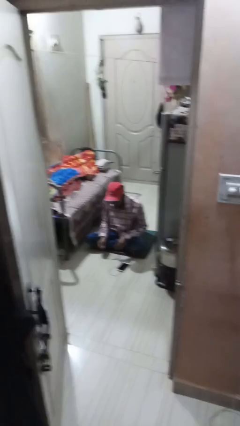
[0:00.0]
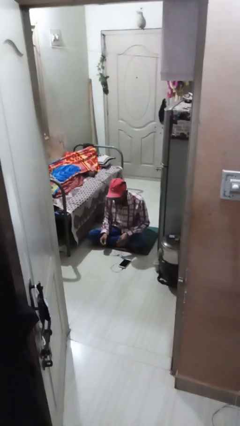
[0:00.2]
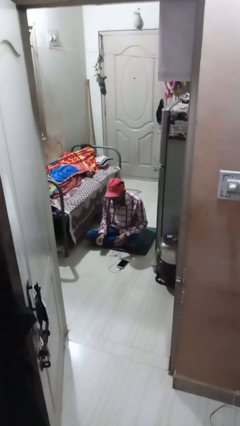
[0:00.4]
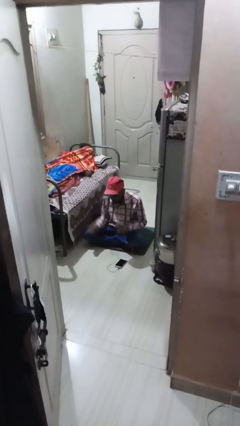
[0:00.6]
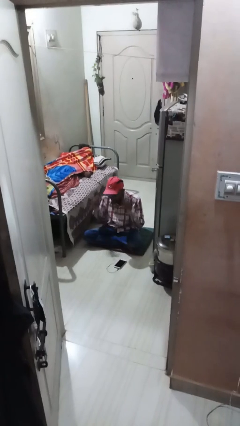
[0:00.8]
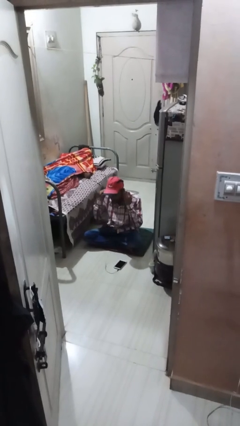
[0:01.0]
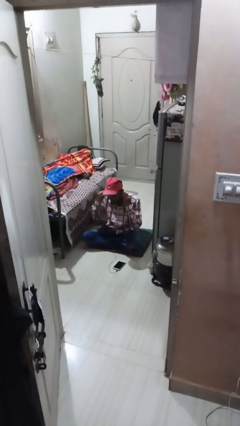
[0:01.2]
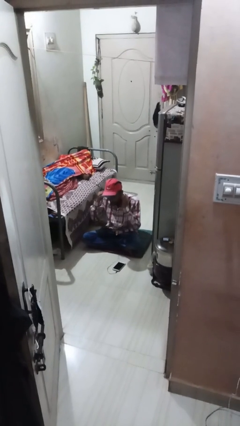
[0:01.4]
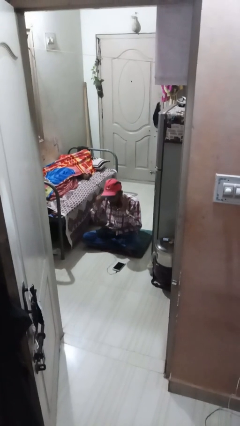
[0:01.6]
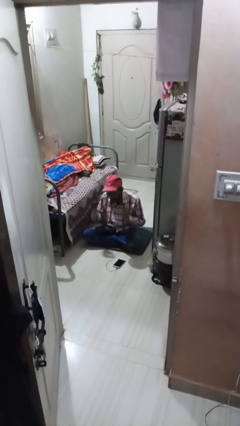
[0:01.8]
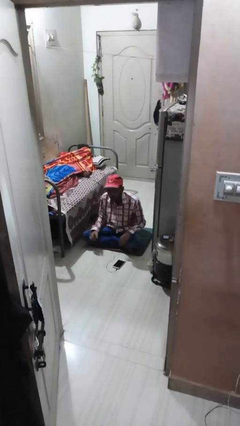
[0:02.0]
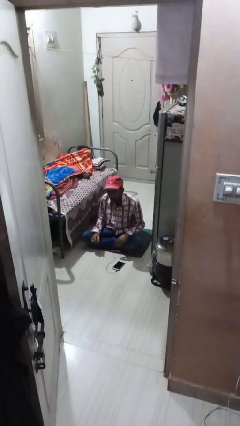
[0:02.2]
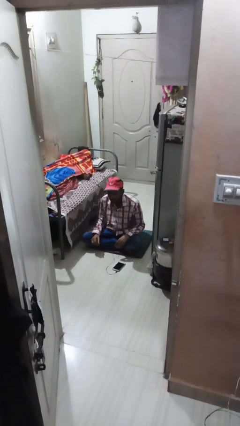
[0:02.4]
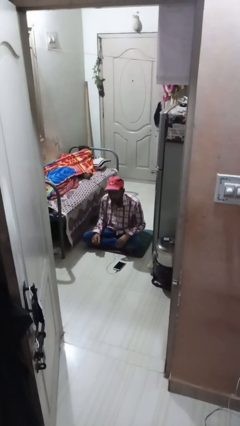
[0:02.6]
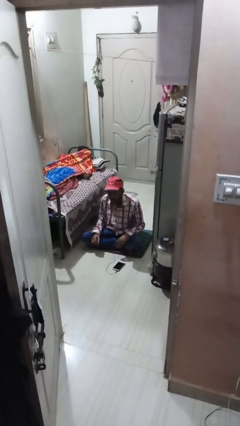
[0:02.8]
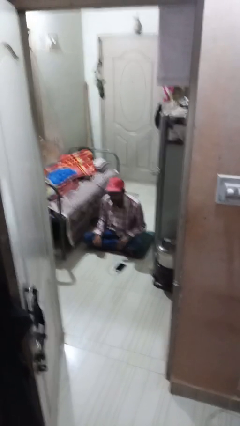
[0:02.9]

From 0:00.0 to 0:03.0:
person puts on headphones

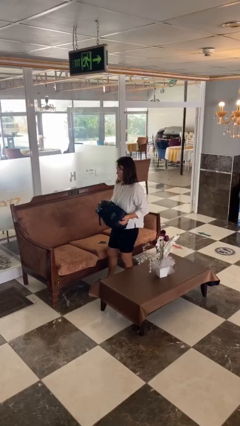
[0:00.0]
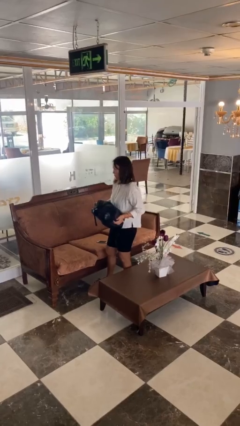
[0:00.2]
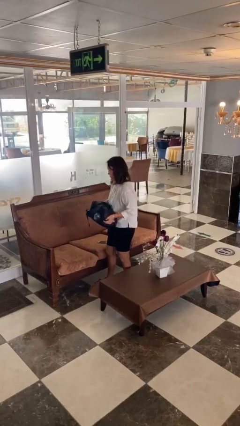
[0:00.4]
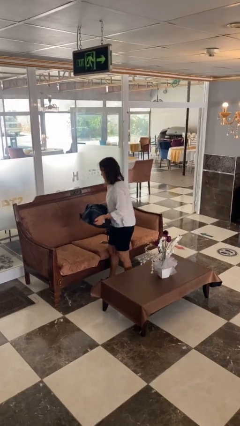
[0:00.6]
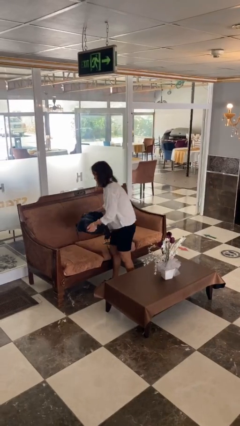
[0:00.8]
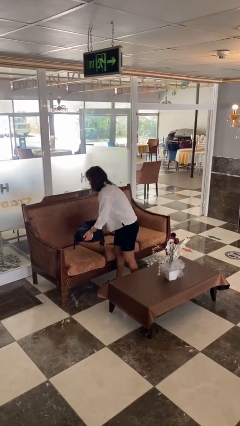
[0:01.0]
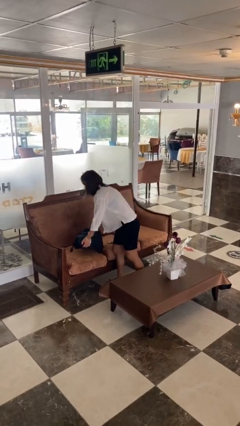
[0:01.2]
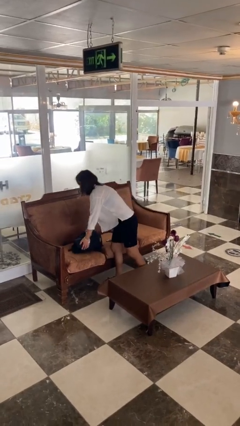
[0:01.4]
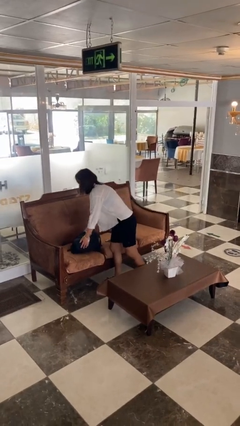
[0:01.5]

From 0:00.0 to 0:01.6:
person puts down object on couch

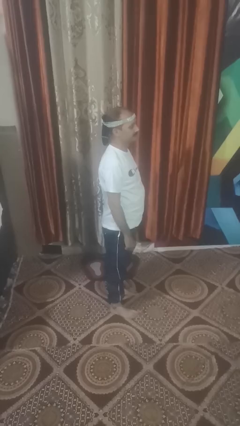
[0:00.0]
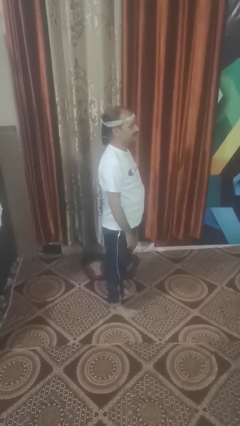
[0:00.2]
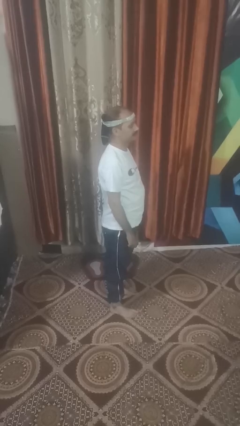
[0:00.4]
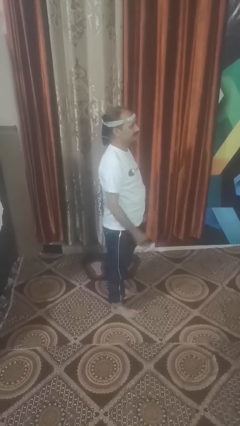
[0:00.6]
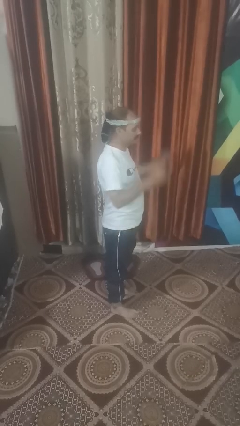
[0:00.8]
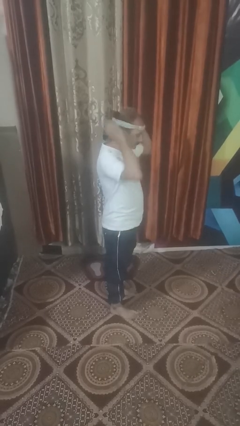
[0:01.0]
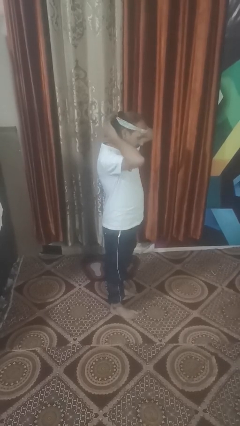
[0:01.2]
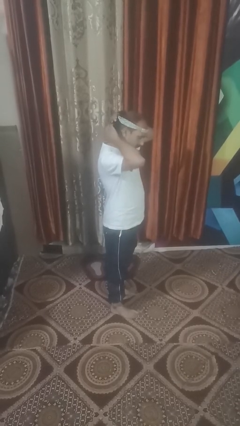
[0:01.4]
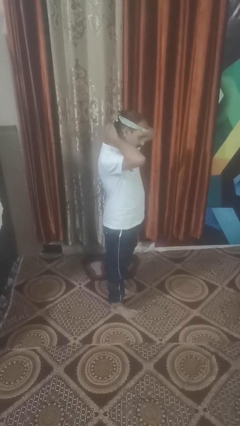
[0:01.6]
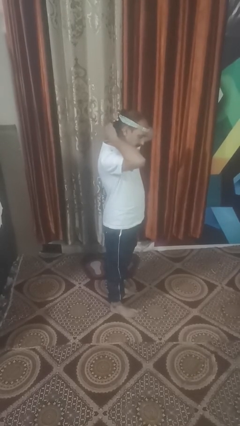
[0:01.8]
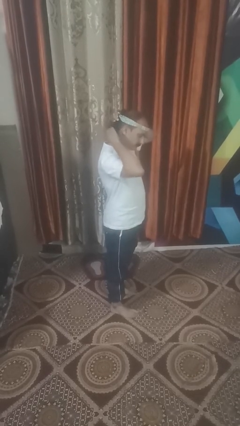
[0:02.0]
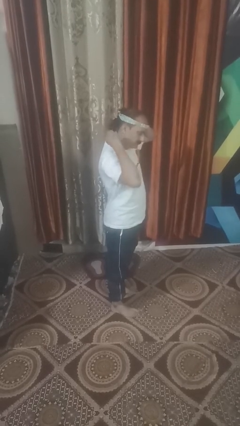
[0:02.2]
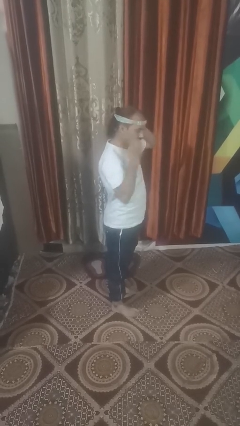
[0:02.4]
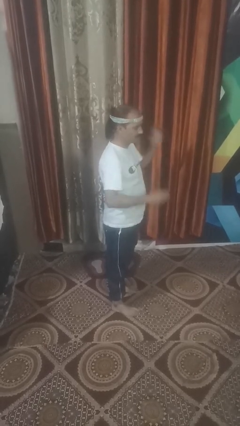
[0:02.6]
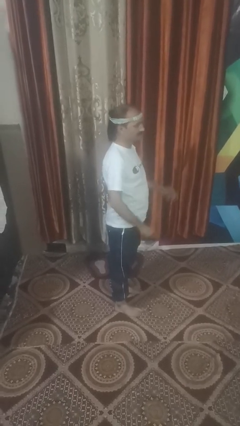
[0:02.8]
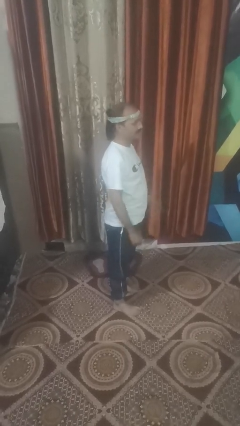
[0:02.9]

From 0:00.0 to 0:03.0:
person takes off hairtie

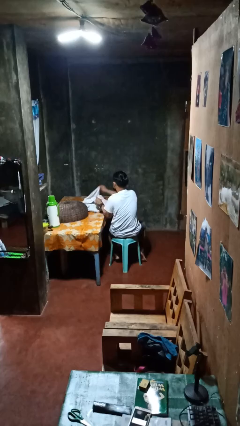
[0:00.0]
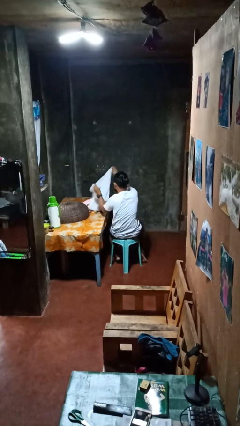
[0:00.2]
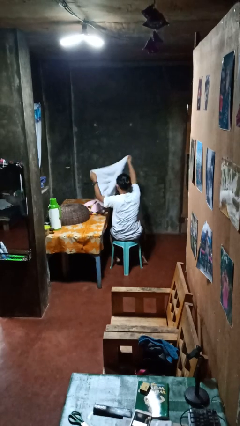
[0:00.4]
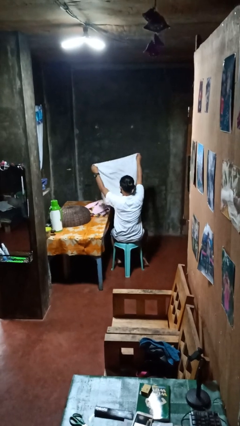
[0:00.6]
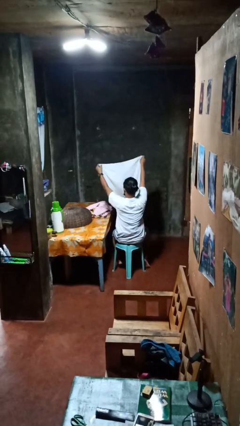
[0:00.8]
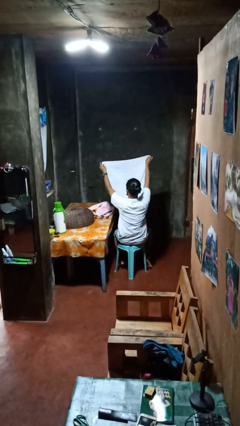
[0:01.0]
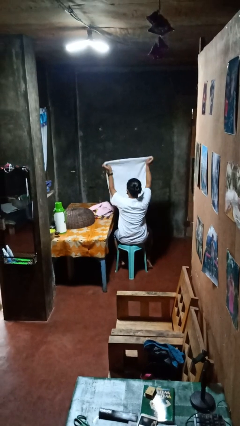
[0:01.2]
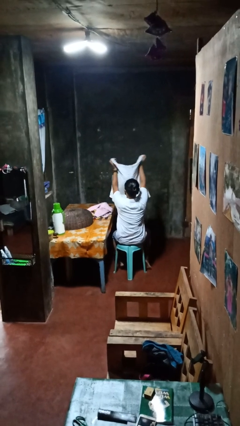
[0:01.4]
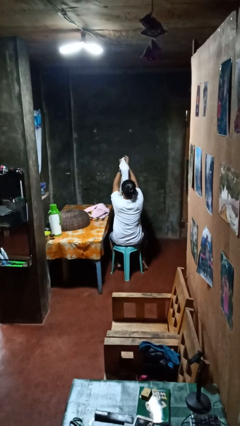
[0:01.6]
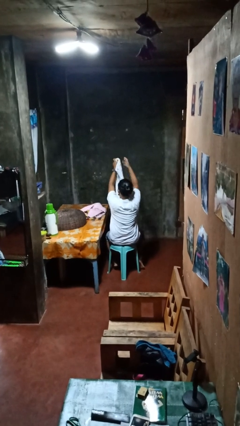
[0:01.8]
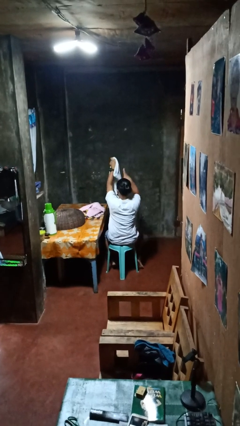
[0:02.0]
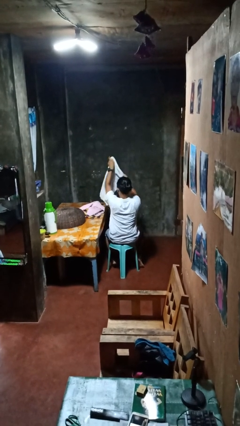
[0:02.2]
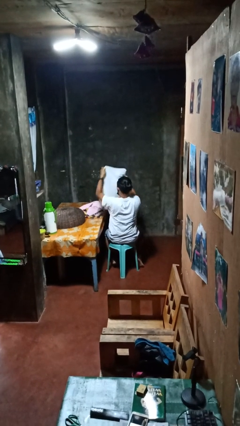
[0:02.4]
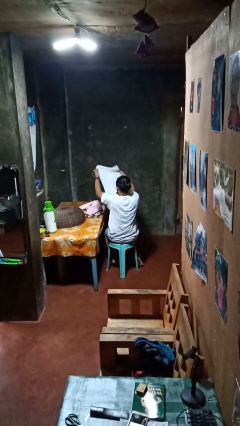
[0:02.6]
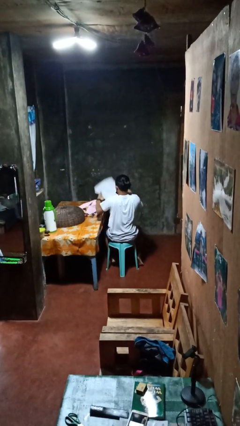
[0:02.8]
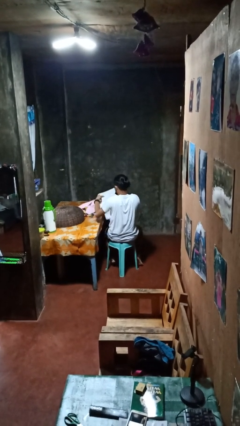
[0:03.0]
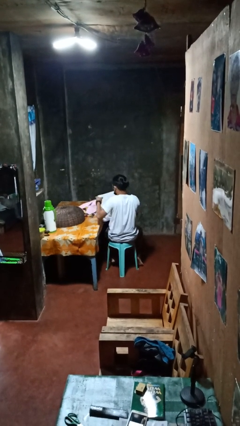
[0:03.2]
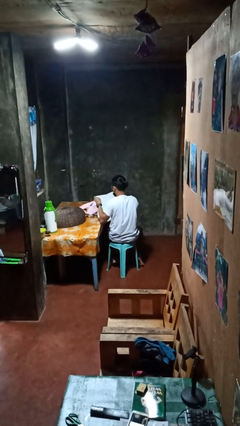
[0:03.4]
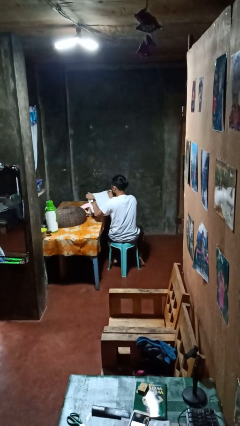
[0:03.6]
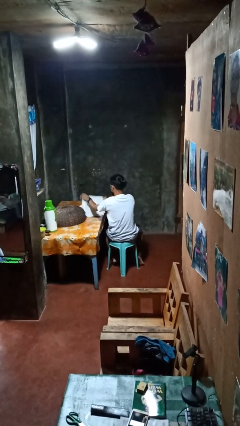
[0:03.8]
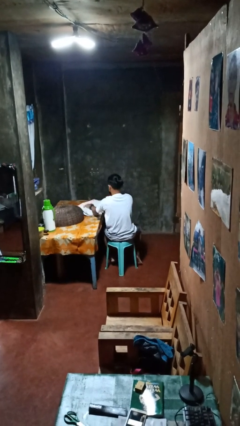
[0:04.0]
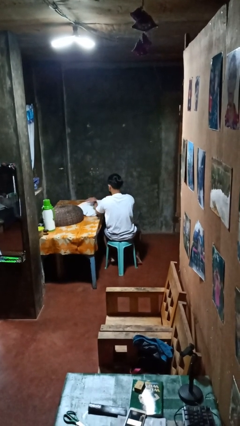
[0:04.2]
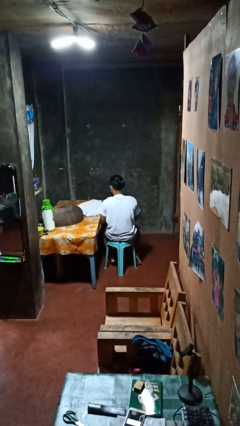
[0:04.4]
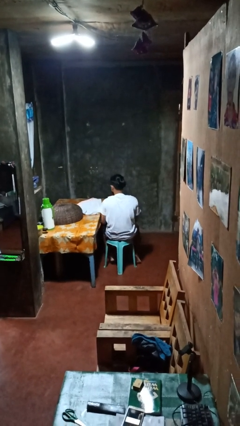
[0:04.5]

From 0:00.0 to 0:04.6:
person folds towel

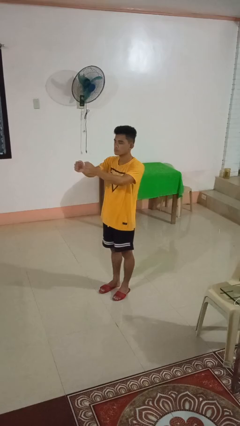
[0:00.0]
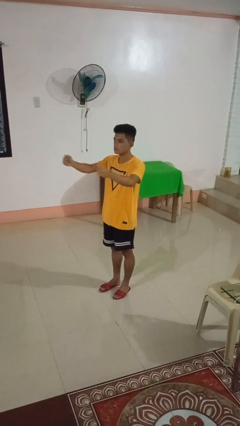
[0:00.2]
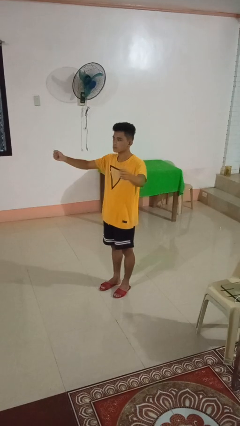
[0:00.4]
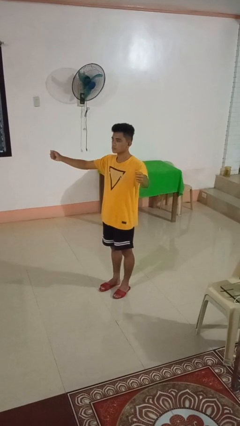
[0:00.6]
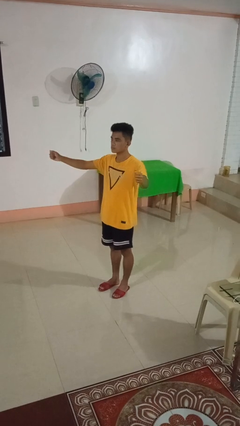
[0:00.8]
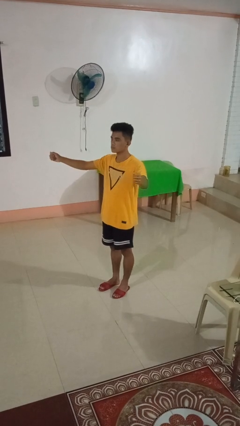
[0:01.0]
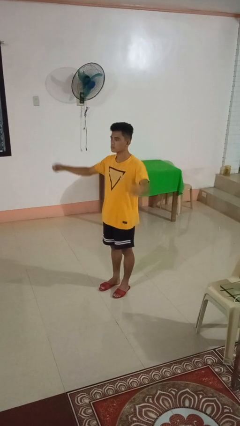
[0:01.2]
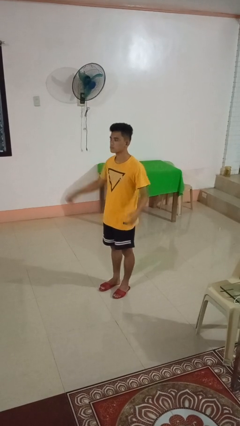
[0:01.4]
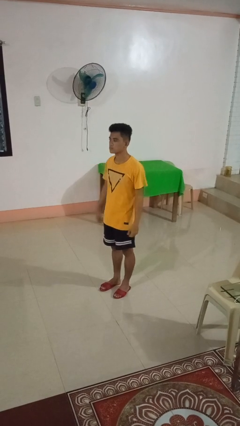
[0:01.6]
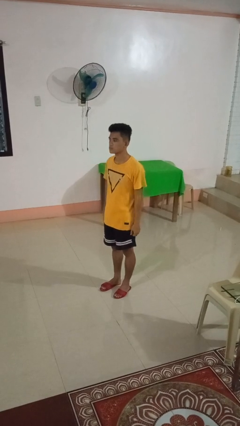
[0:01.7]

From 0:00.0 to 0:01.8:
person gestures zoom out

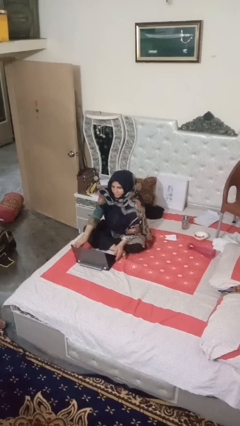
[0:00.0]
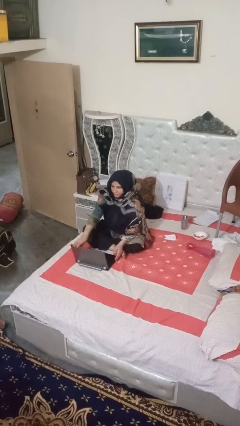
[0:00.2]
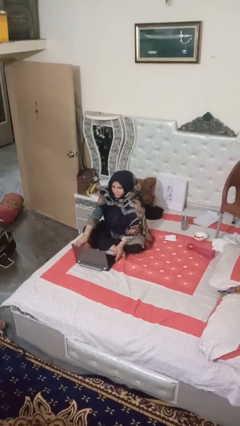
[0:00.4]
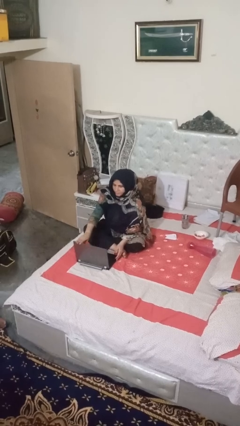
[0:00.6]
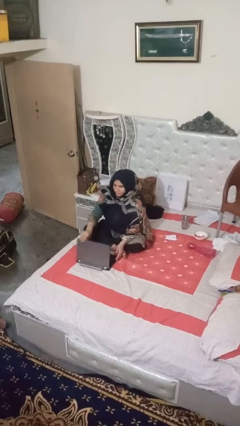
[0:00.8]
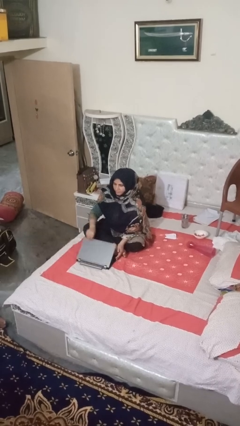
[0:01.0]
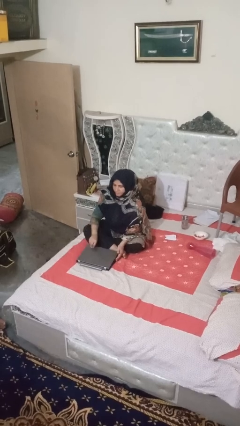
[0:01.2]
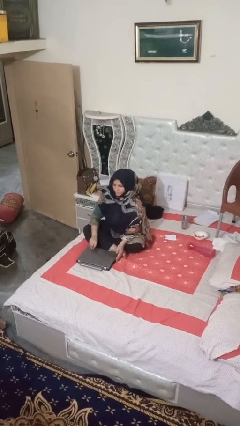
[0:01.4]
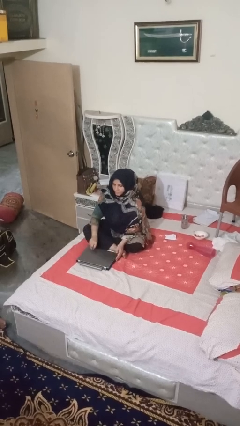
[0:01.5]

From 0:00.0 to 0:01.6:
person closes laptop

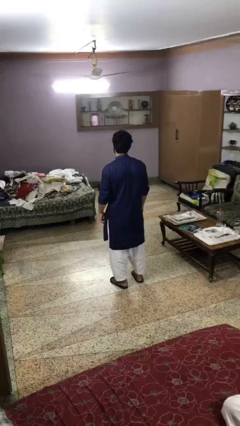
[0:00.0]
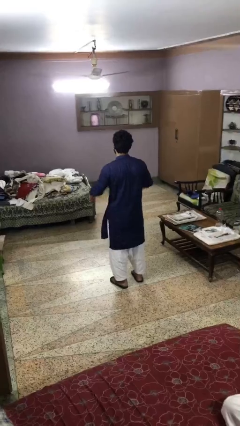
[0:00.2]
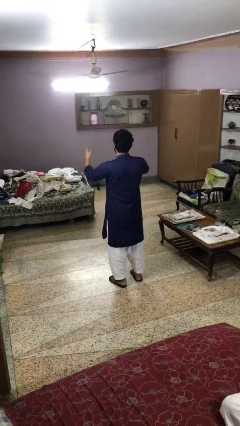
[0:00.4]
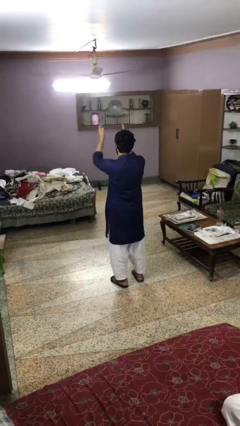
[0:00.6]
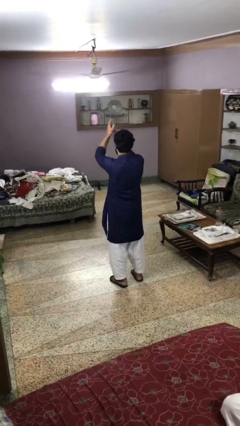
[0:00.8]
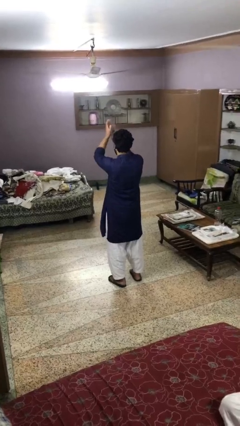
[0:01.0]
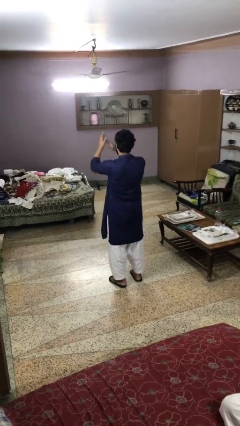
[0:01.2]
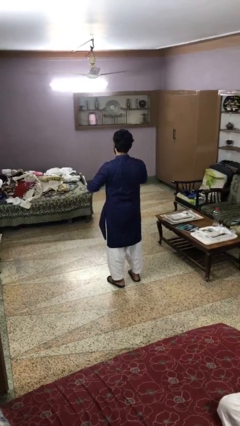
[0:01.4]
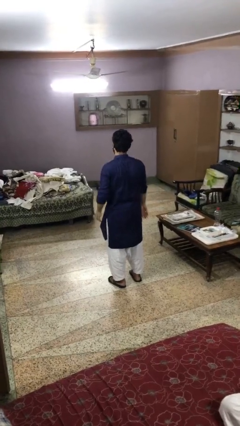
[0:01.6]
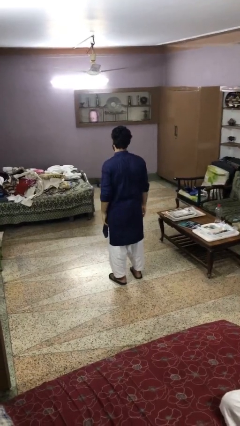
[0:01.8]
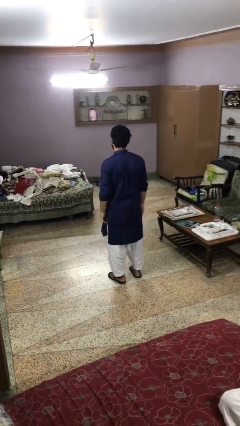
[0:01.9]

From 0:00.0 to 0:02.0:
person claps hands
